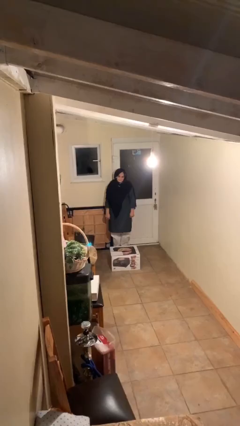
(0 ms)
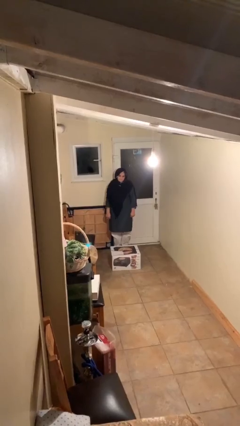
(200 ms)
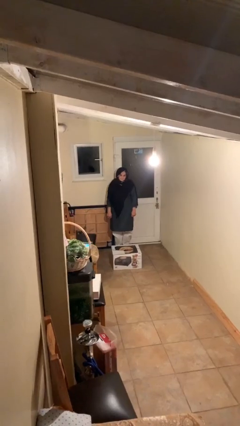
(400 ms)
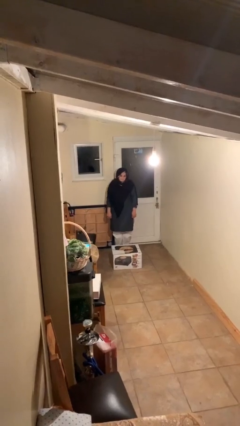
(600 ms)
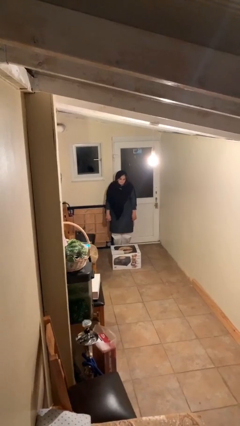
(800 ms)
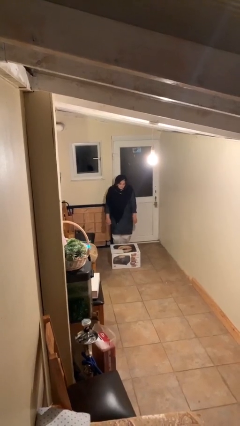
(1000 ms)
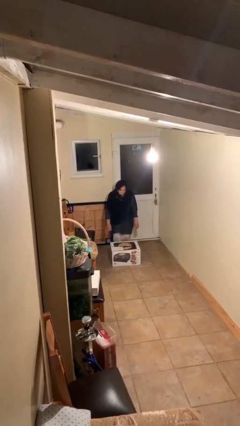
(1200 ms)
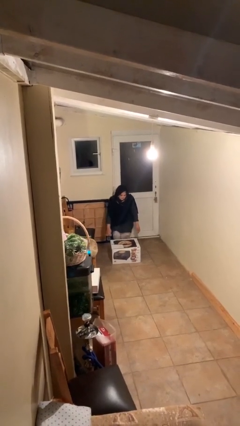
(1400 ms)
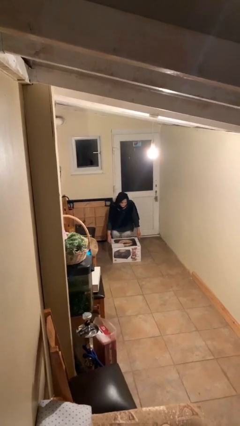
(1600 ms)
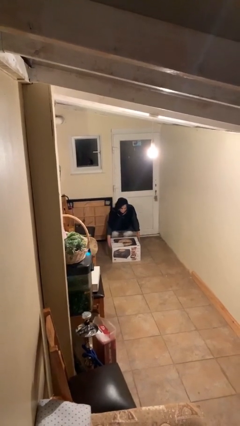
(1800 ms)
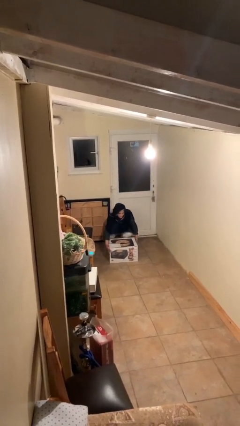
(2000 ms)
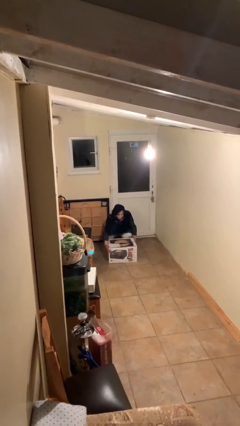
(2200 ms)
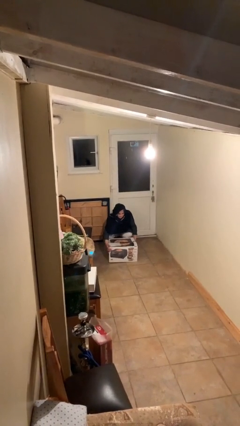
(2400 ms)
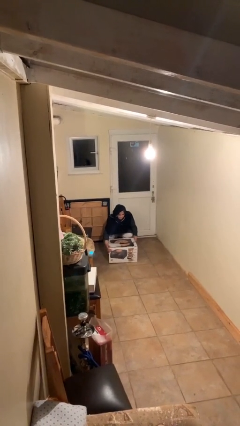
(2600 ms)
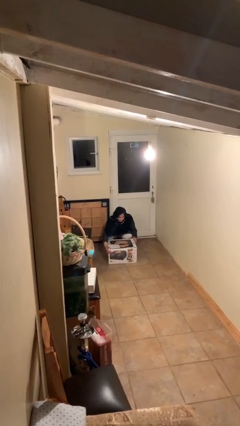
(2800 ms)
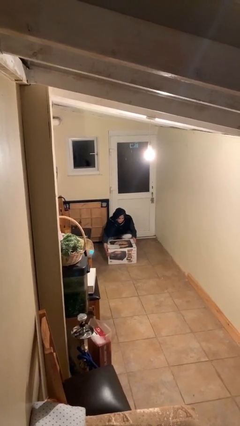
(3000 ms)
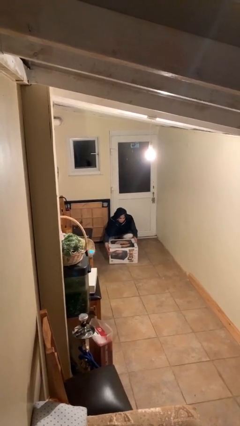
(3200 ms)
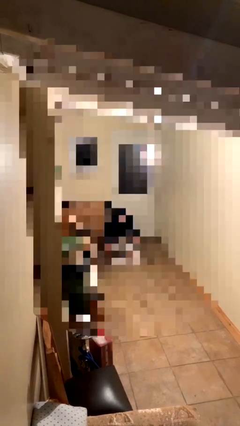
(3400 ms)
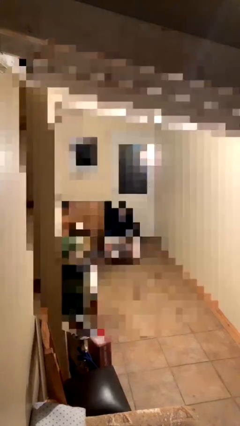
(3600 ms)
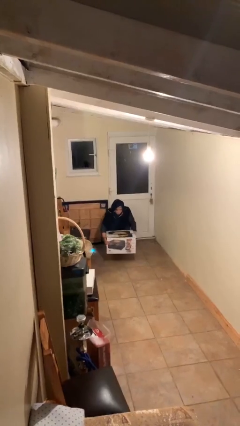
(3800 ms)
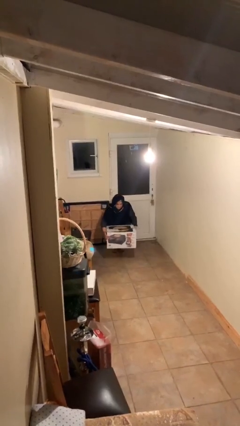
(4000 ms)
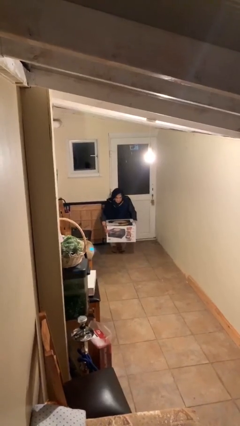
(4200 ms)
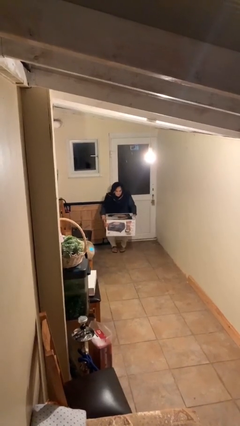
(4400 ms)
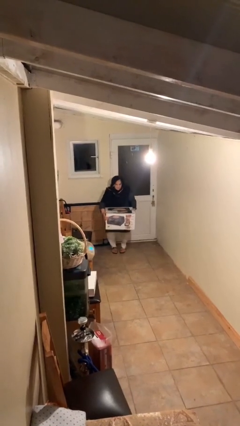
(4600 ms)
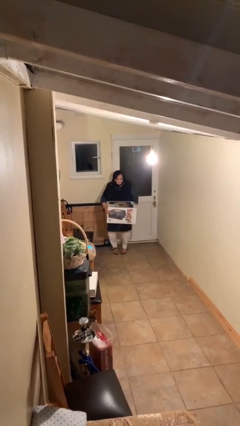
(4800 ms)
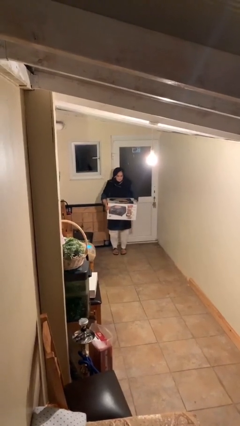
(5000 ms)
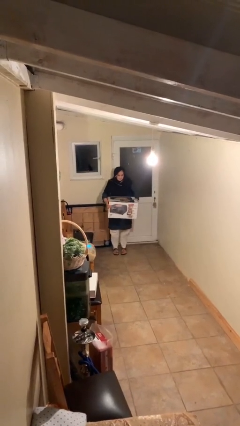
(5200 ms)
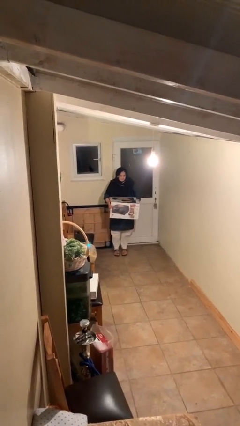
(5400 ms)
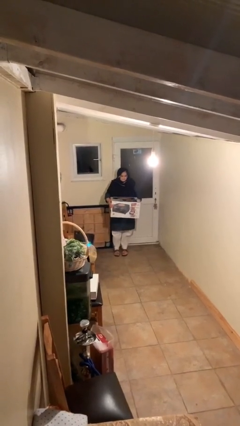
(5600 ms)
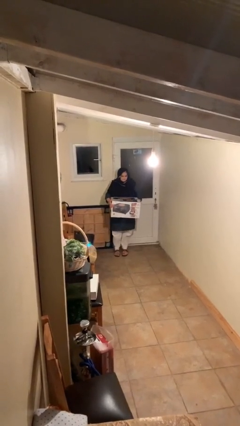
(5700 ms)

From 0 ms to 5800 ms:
person picks up object from floor
